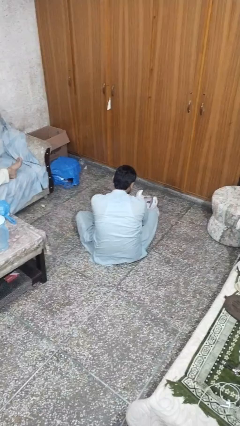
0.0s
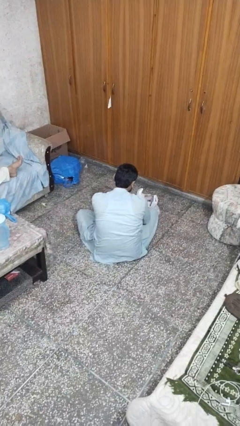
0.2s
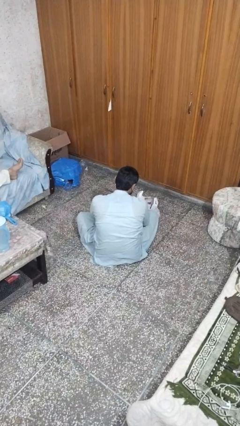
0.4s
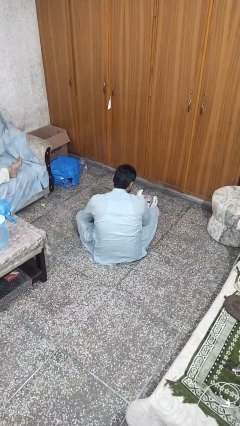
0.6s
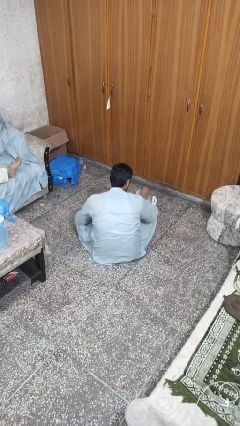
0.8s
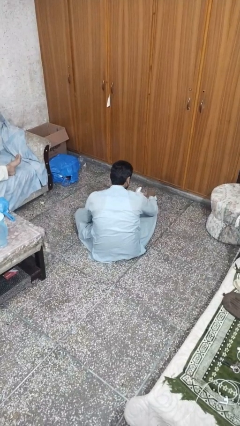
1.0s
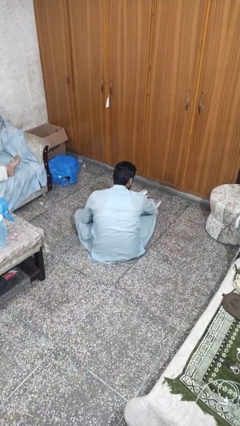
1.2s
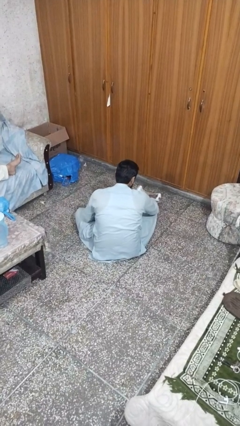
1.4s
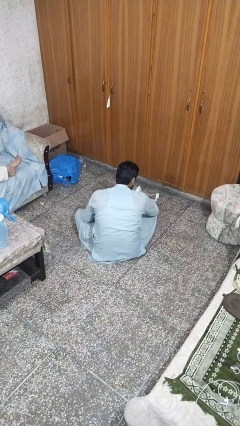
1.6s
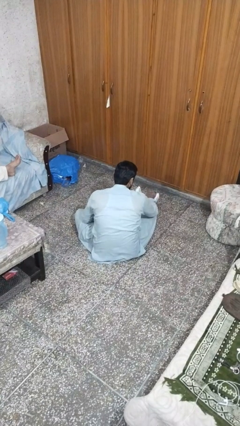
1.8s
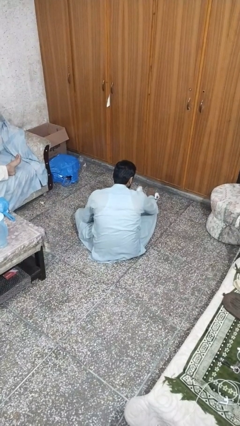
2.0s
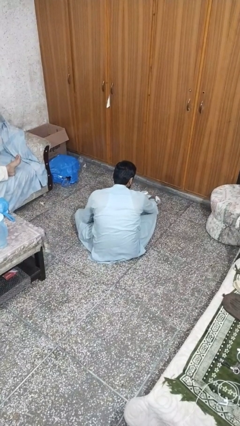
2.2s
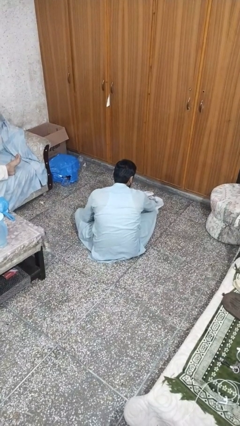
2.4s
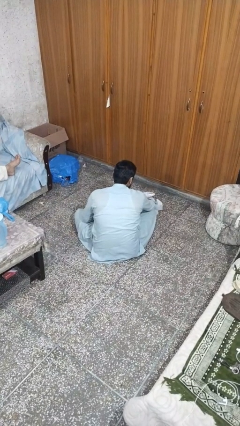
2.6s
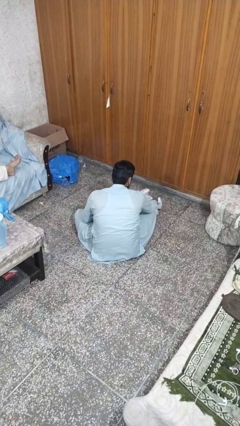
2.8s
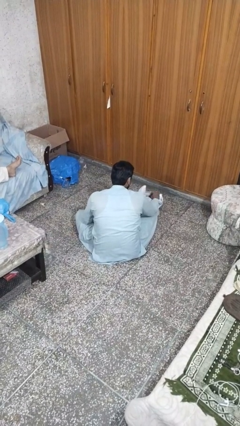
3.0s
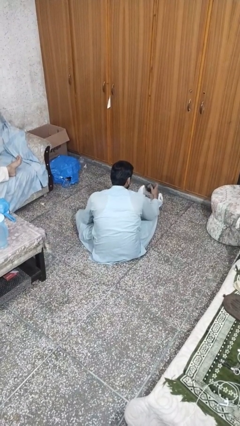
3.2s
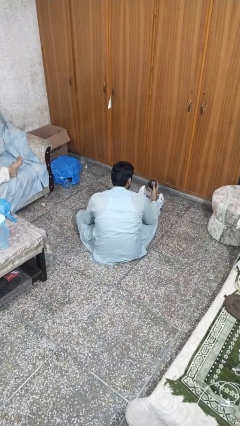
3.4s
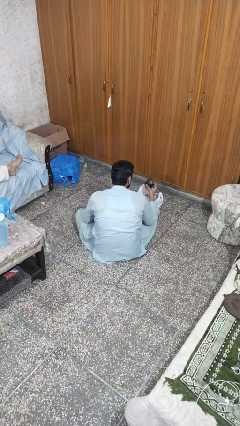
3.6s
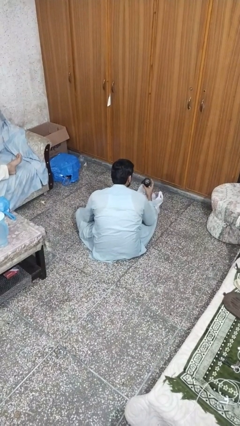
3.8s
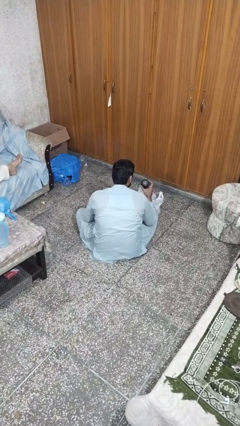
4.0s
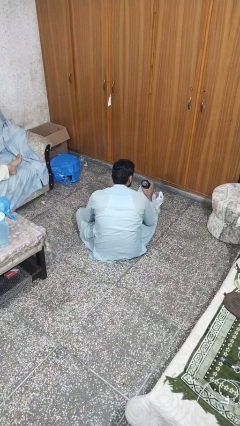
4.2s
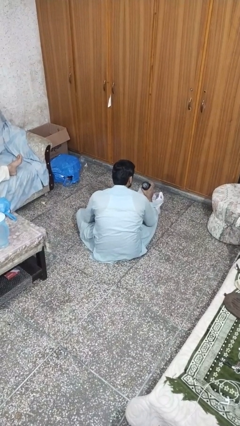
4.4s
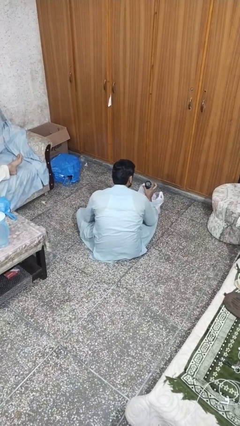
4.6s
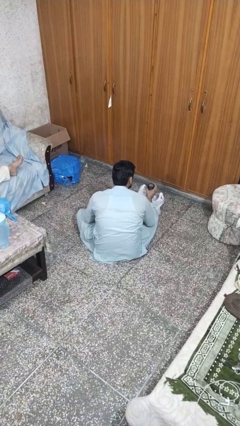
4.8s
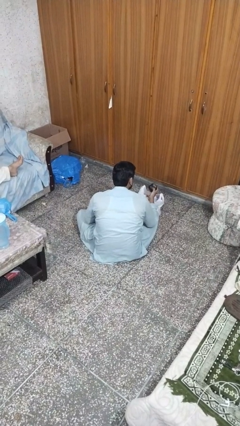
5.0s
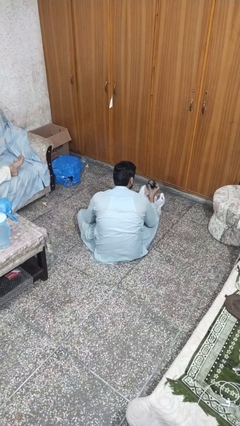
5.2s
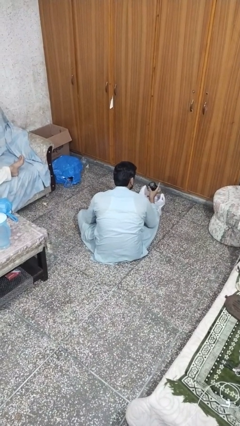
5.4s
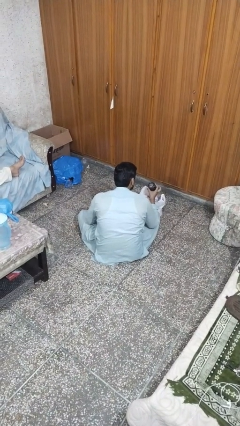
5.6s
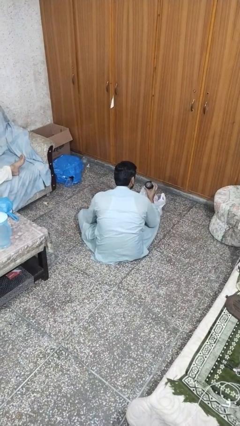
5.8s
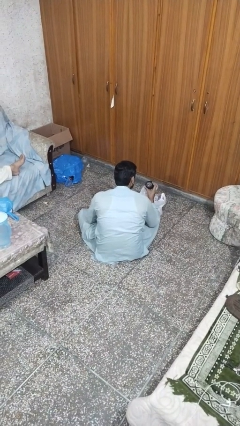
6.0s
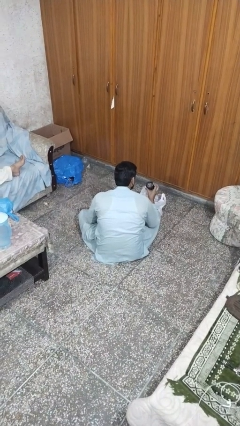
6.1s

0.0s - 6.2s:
person takes object from bag

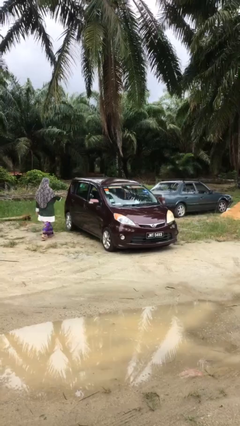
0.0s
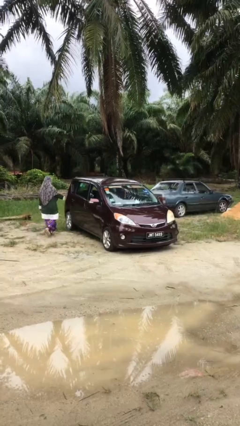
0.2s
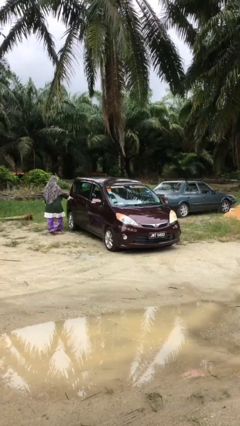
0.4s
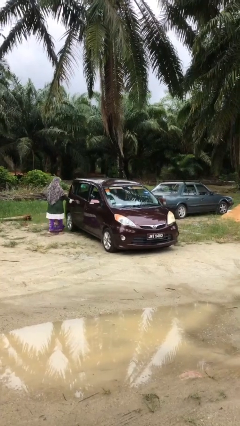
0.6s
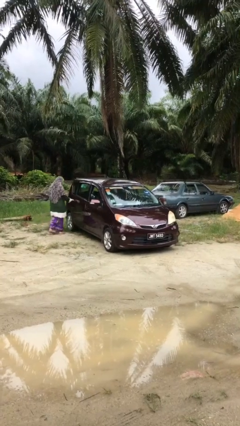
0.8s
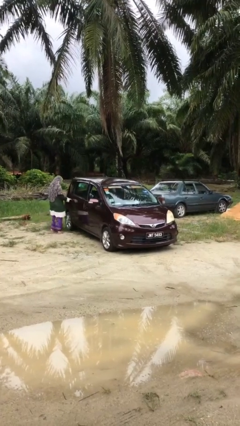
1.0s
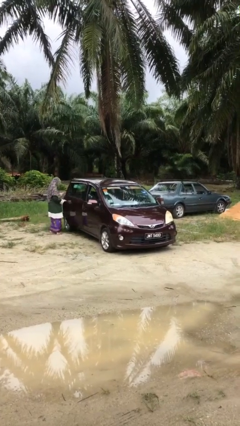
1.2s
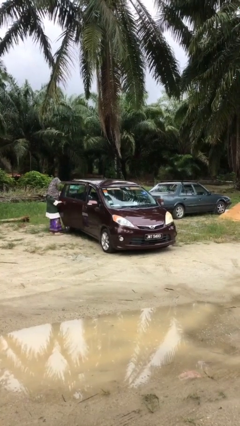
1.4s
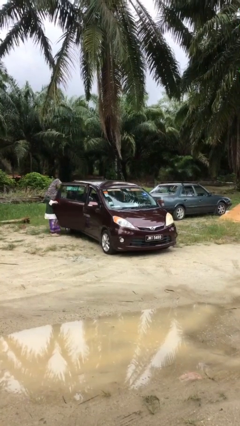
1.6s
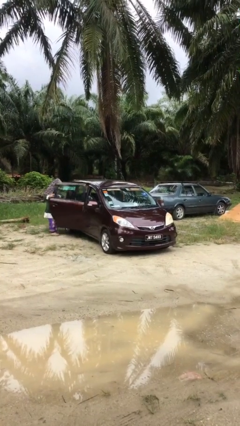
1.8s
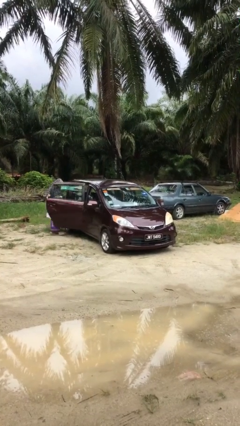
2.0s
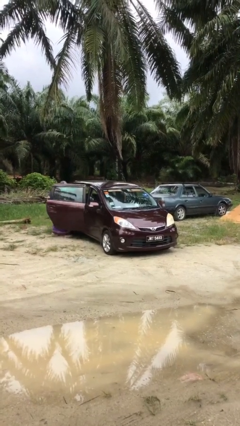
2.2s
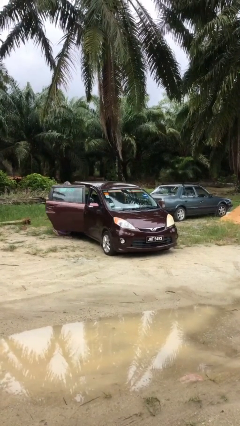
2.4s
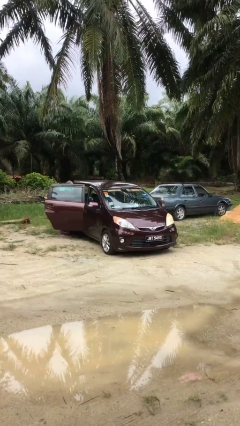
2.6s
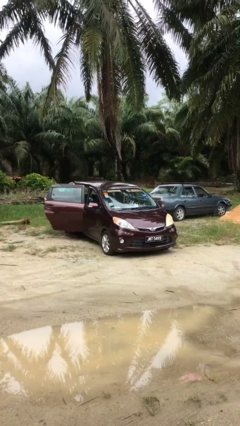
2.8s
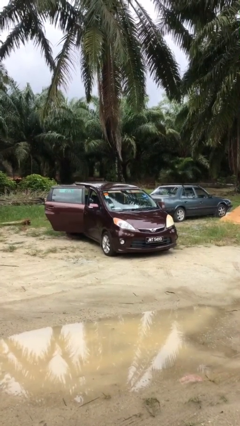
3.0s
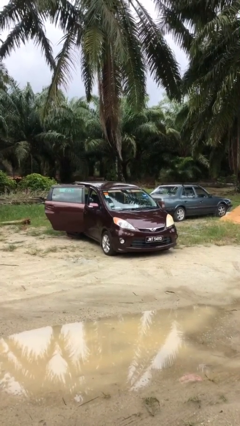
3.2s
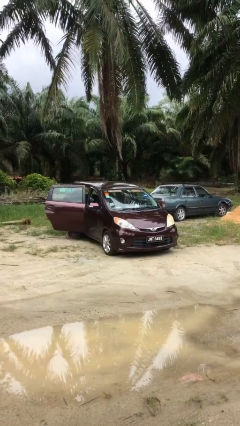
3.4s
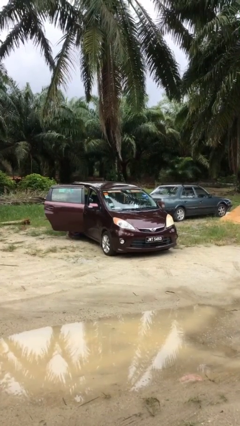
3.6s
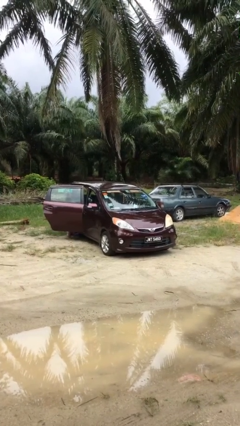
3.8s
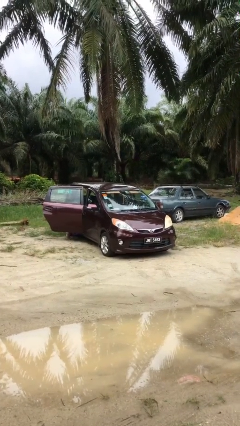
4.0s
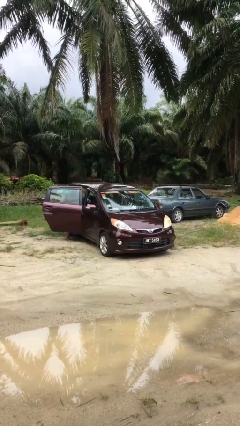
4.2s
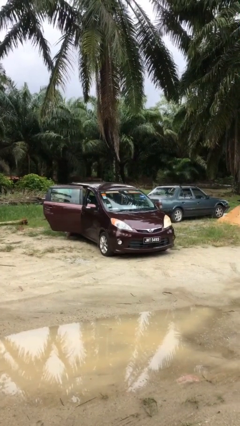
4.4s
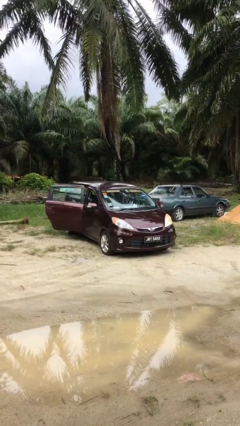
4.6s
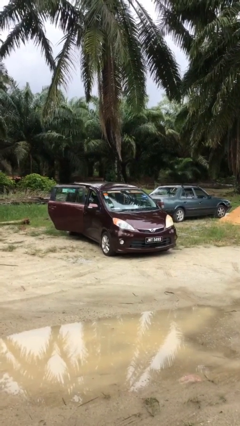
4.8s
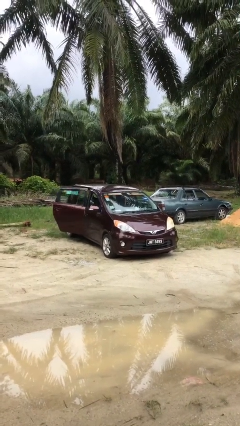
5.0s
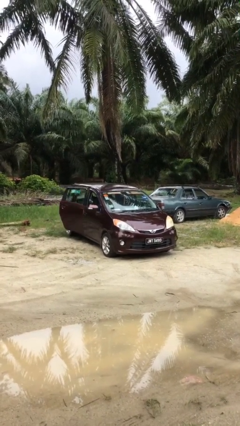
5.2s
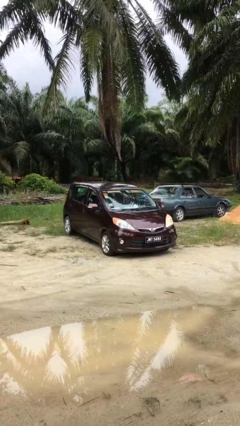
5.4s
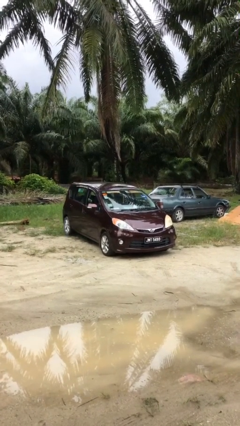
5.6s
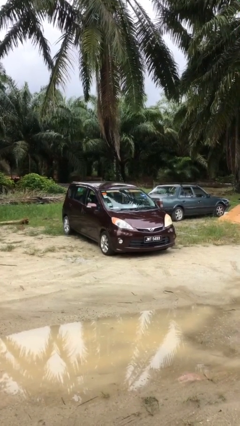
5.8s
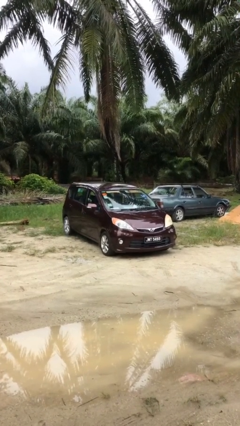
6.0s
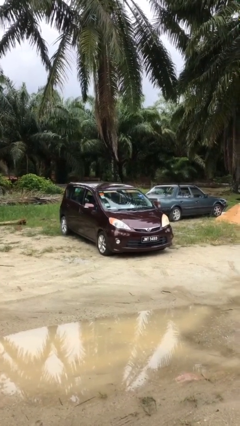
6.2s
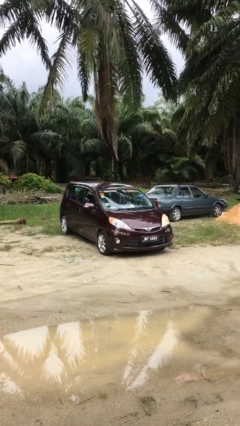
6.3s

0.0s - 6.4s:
car picks up person

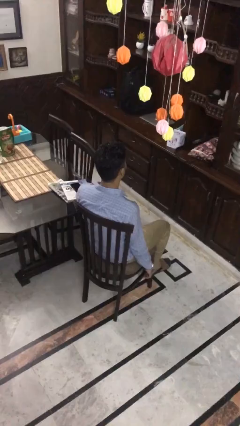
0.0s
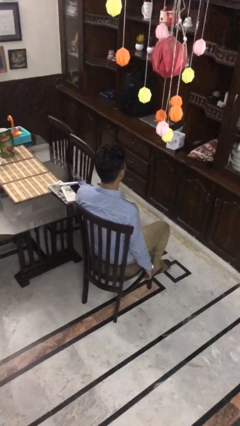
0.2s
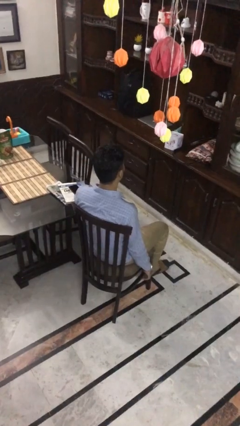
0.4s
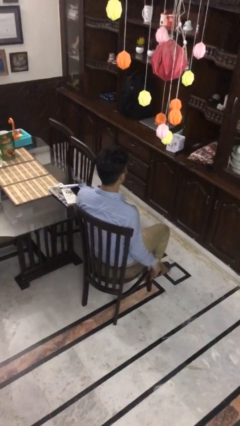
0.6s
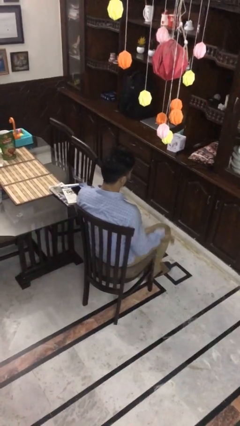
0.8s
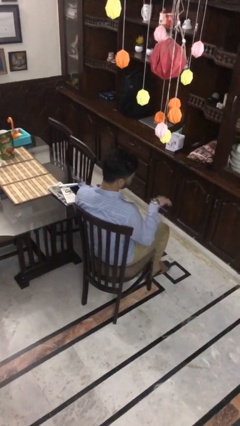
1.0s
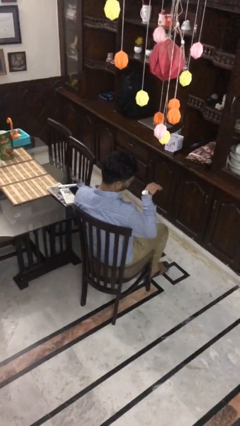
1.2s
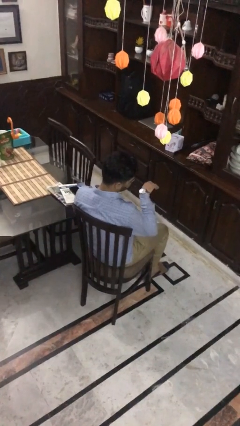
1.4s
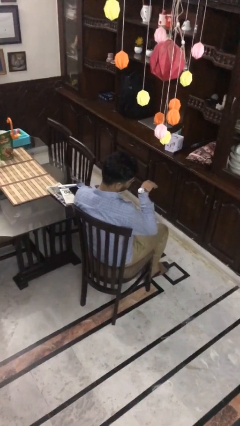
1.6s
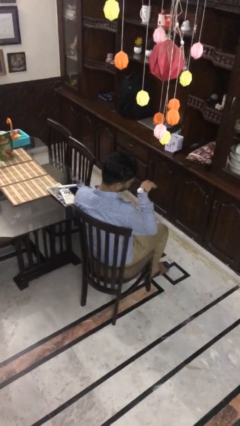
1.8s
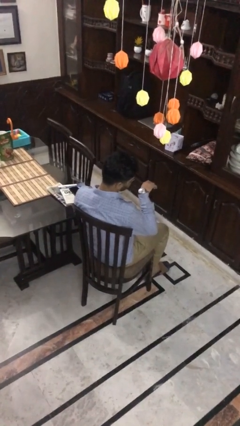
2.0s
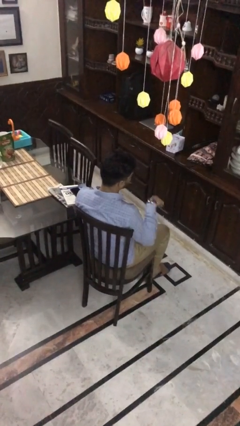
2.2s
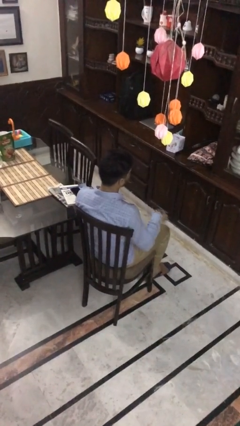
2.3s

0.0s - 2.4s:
person looks at wristwatch

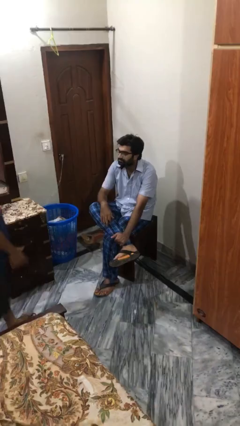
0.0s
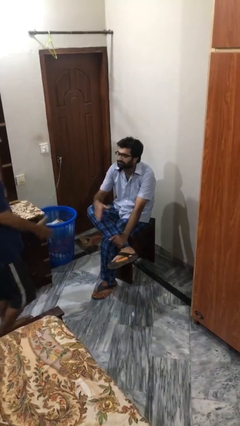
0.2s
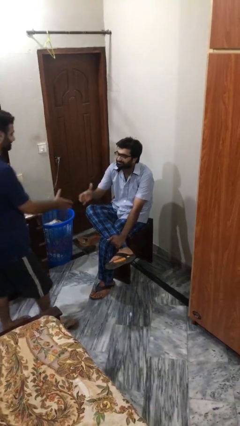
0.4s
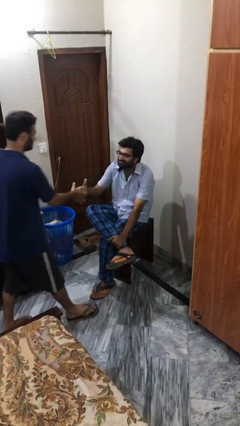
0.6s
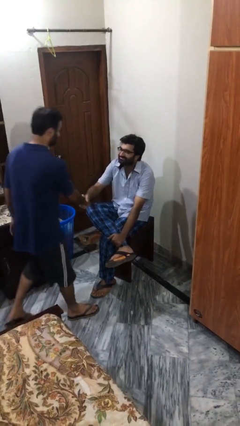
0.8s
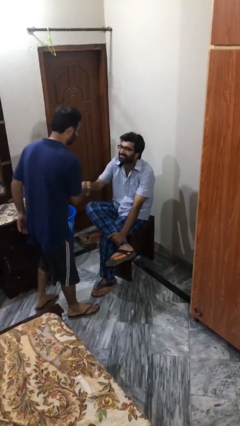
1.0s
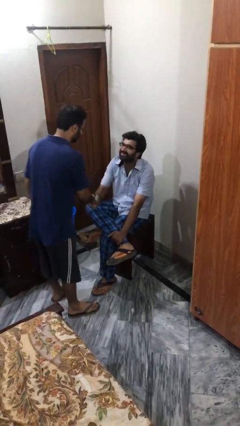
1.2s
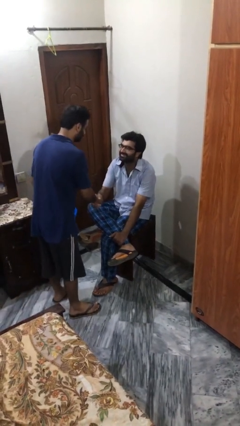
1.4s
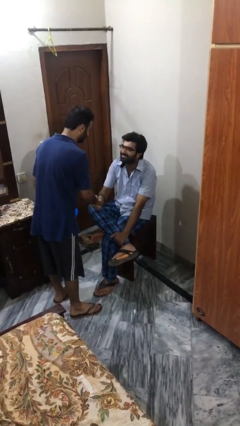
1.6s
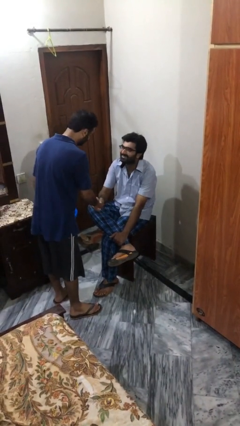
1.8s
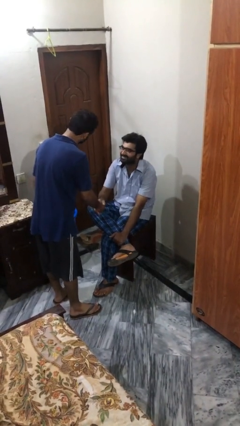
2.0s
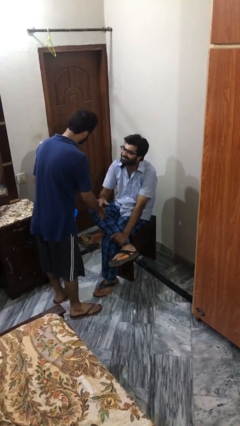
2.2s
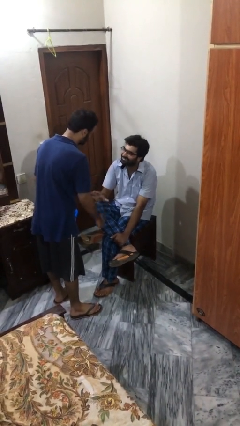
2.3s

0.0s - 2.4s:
person shakes hand

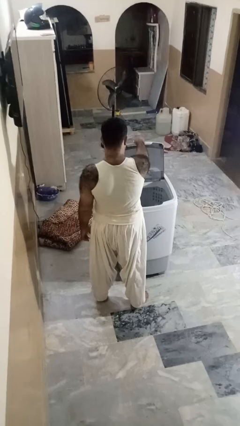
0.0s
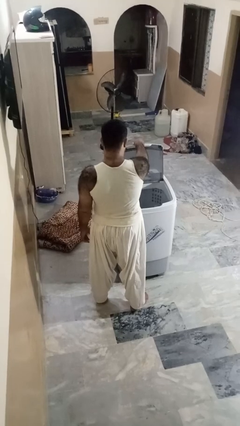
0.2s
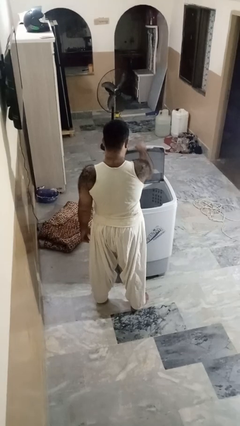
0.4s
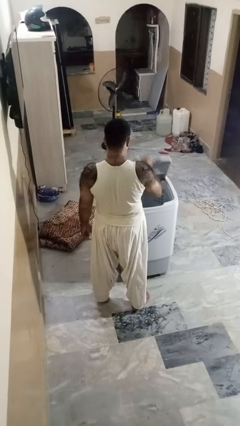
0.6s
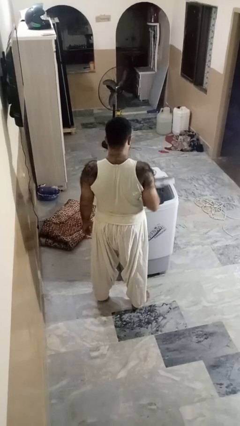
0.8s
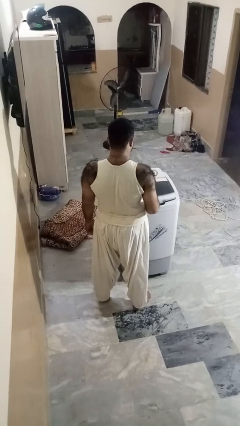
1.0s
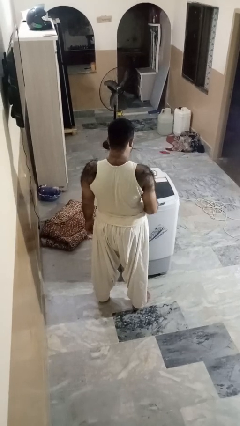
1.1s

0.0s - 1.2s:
person closes clothes washer
